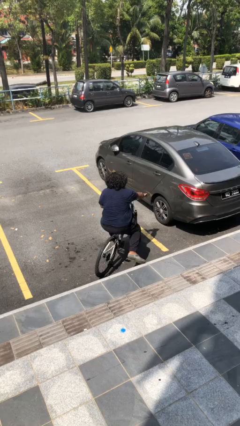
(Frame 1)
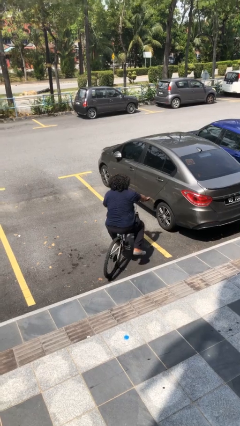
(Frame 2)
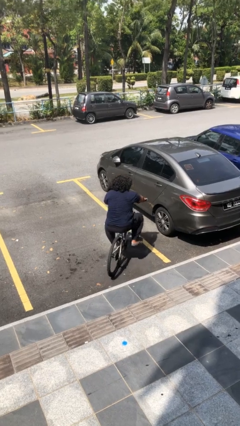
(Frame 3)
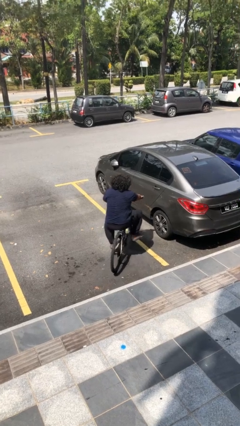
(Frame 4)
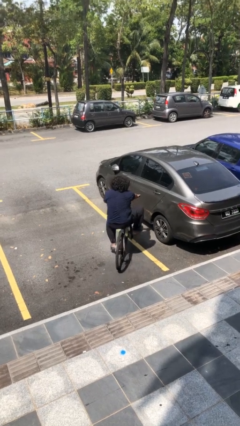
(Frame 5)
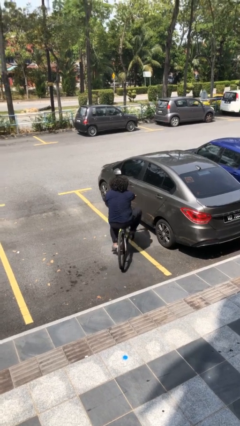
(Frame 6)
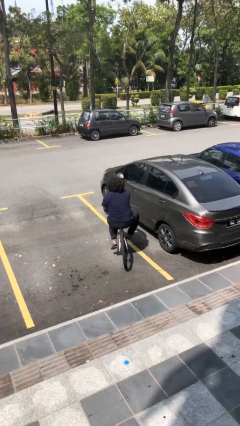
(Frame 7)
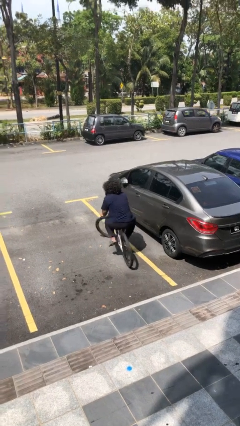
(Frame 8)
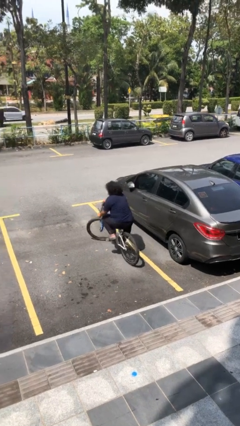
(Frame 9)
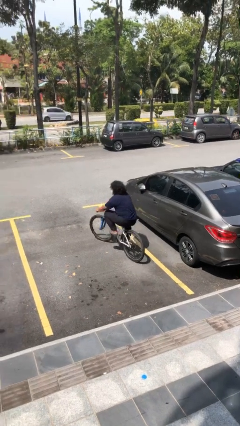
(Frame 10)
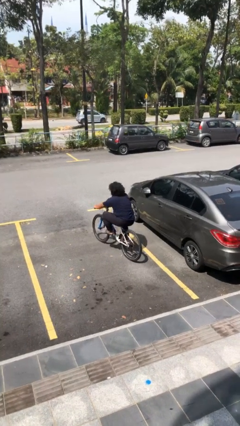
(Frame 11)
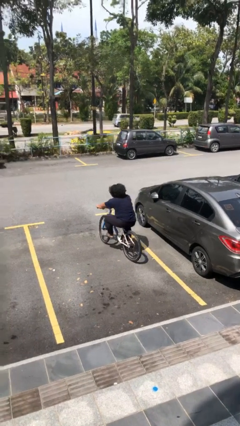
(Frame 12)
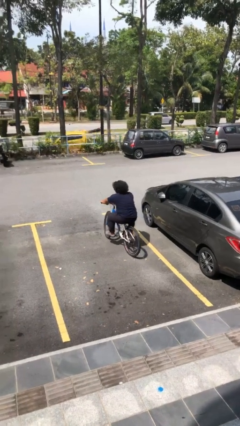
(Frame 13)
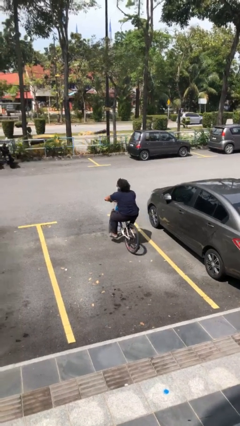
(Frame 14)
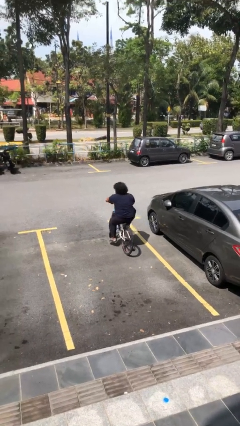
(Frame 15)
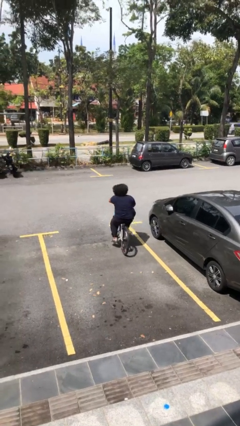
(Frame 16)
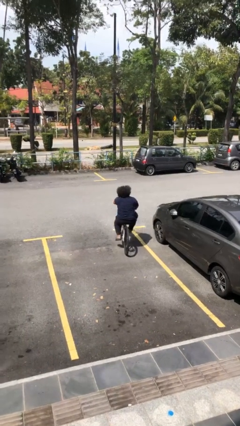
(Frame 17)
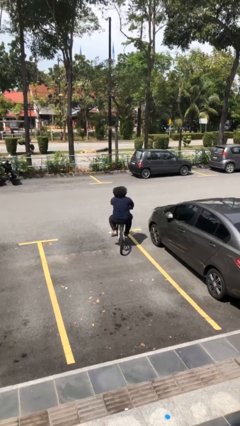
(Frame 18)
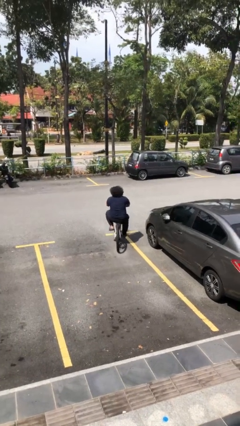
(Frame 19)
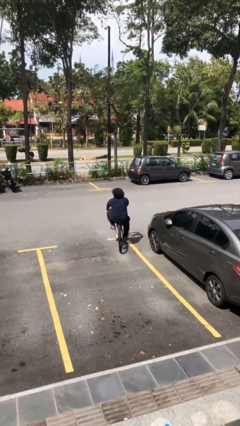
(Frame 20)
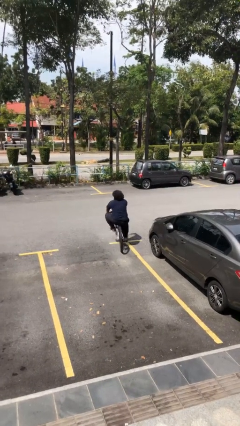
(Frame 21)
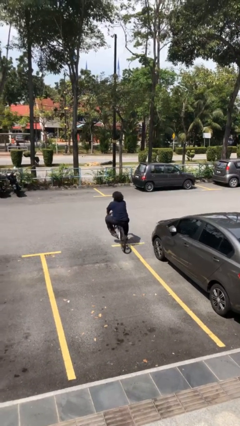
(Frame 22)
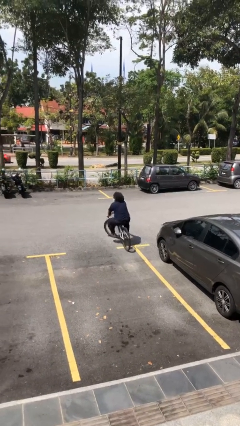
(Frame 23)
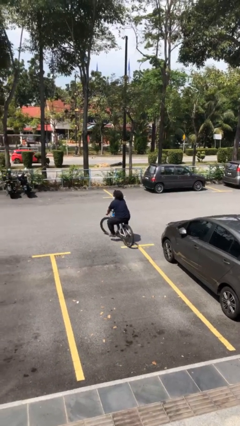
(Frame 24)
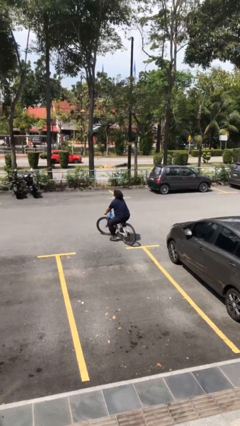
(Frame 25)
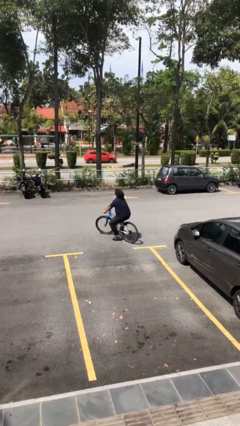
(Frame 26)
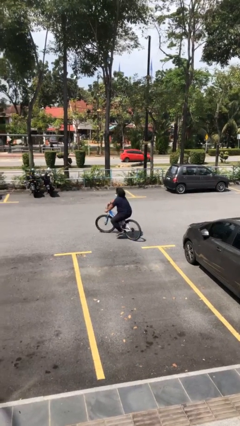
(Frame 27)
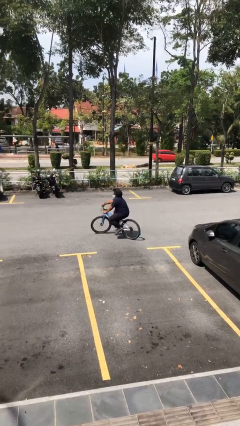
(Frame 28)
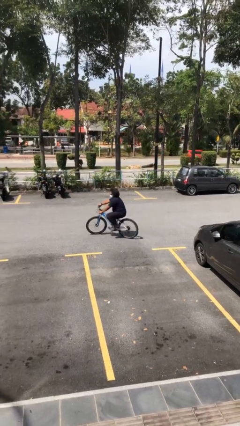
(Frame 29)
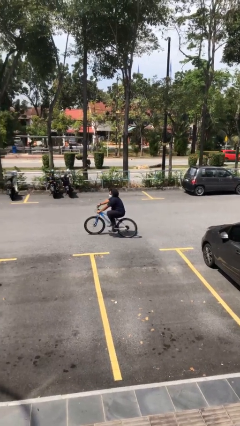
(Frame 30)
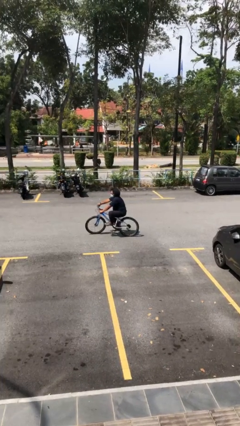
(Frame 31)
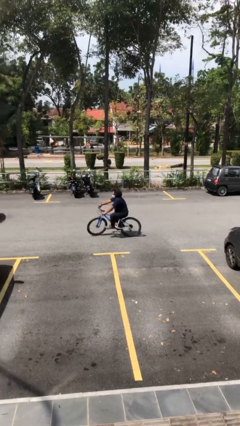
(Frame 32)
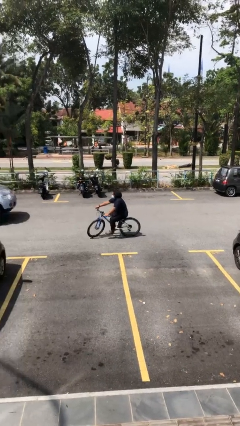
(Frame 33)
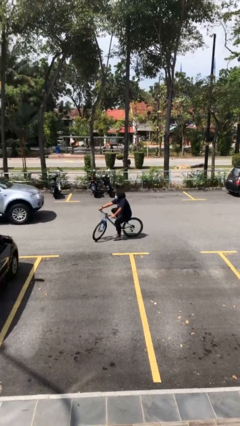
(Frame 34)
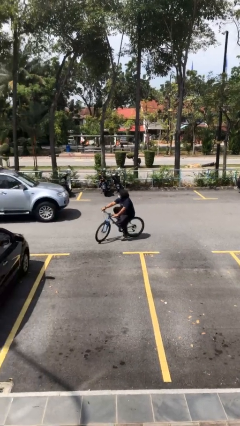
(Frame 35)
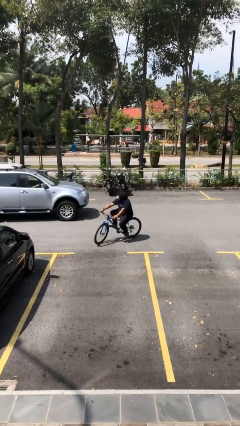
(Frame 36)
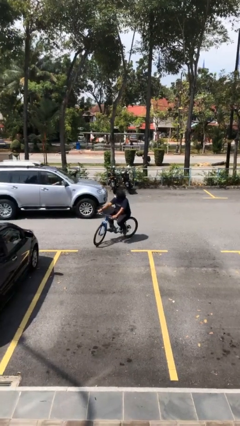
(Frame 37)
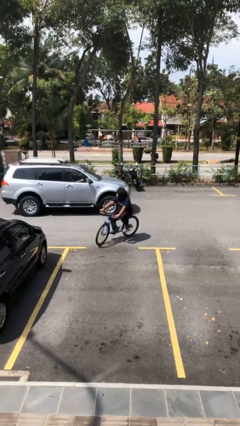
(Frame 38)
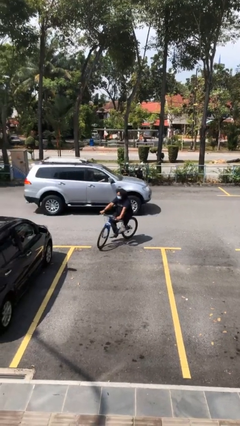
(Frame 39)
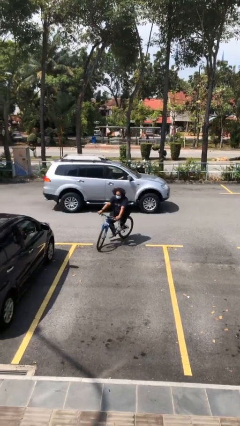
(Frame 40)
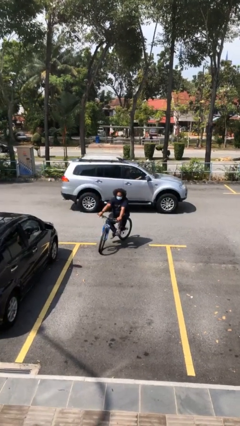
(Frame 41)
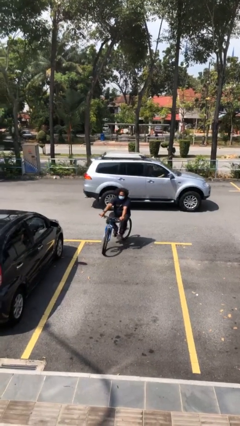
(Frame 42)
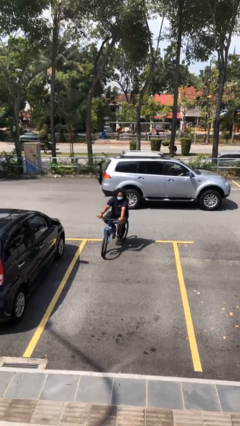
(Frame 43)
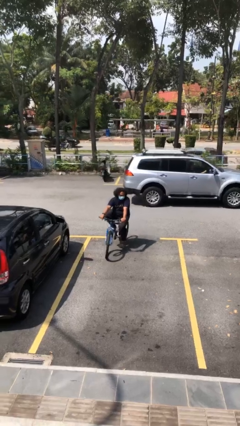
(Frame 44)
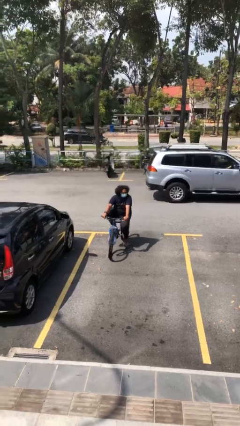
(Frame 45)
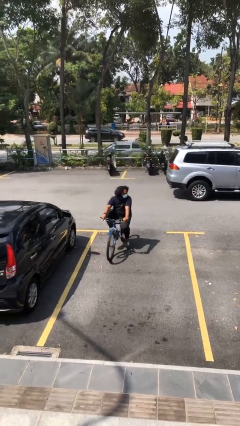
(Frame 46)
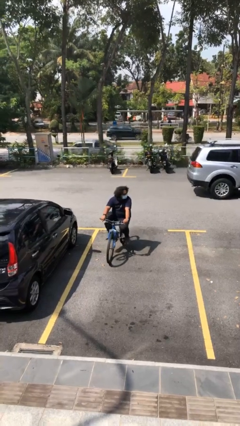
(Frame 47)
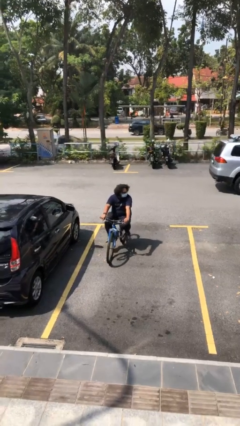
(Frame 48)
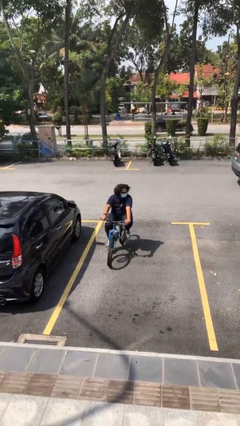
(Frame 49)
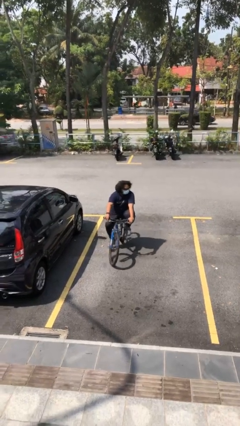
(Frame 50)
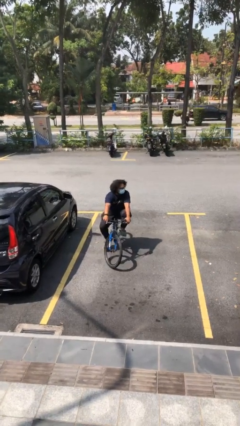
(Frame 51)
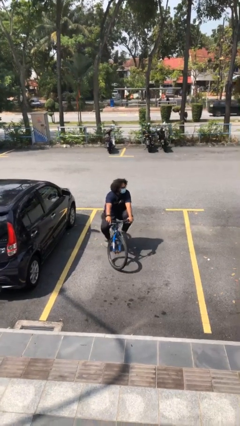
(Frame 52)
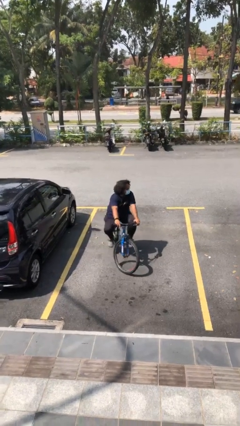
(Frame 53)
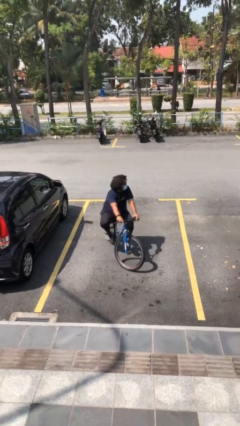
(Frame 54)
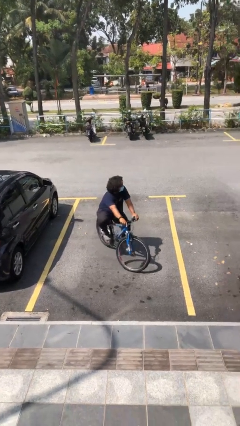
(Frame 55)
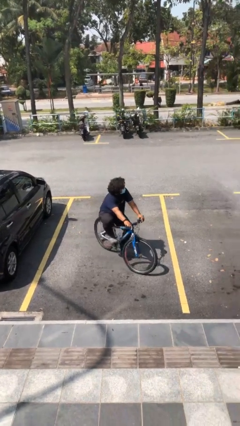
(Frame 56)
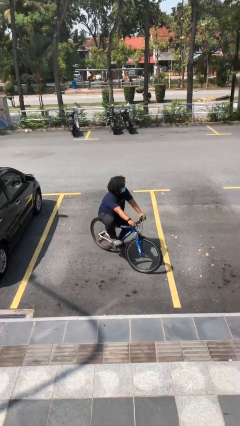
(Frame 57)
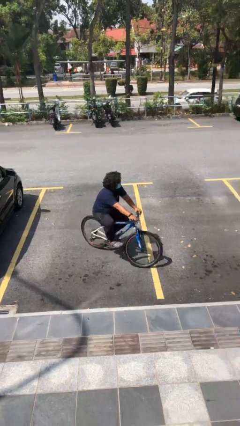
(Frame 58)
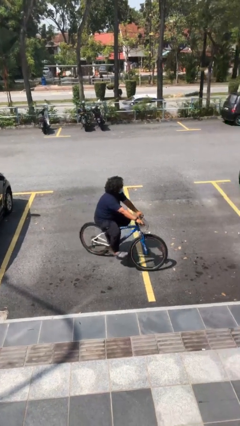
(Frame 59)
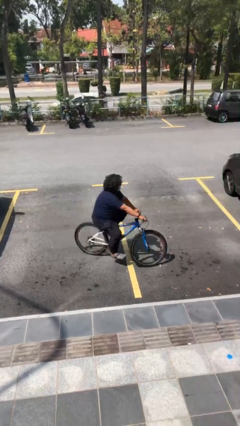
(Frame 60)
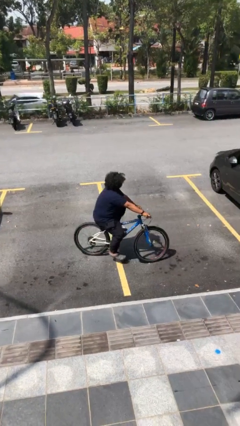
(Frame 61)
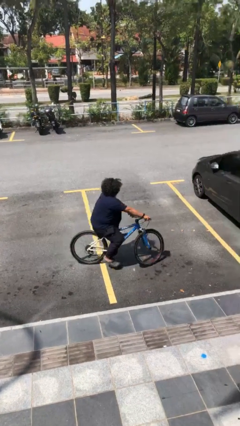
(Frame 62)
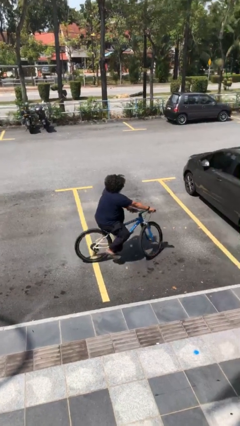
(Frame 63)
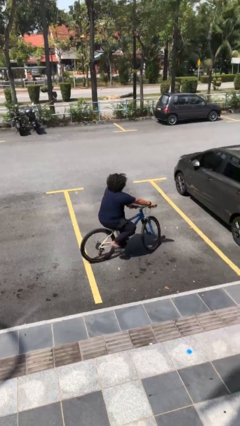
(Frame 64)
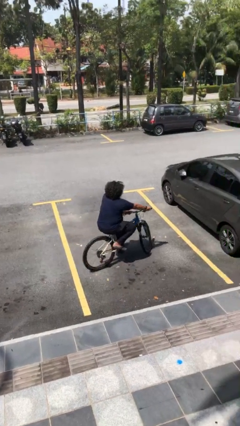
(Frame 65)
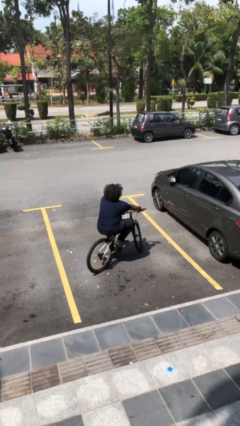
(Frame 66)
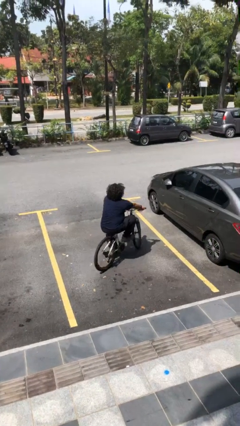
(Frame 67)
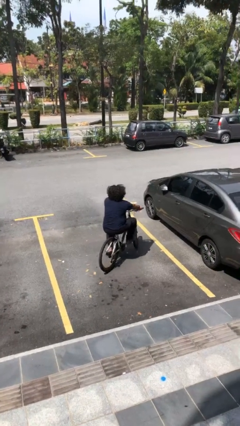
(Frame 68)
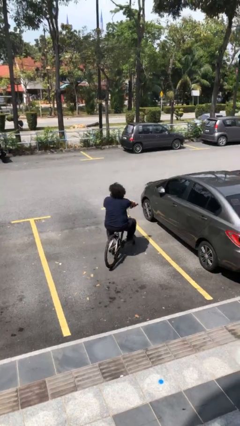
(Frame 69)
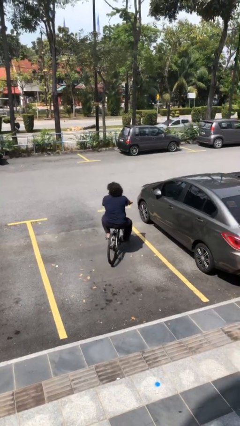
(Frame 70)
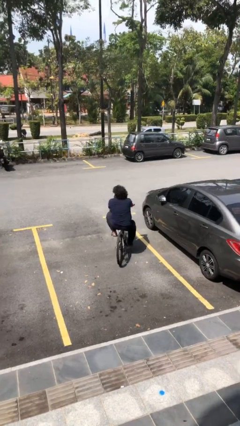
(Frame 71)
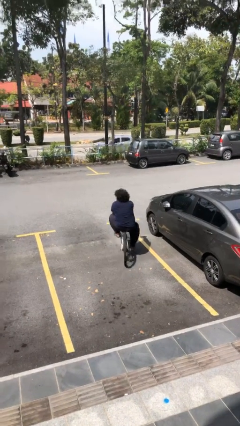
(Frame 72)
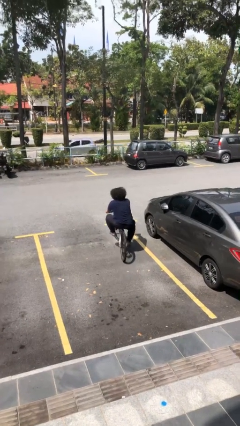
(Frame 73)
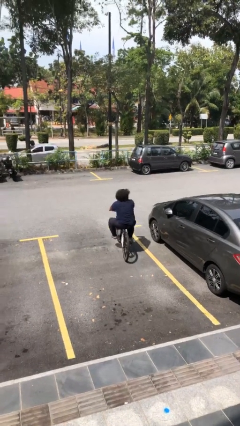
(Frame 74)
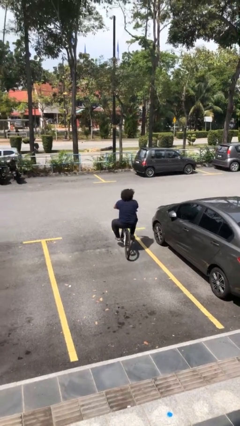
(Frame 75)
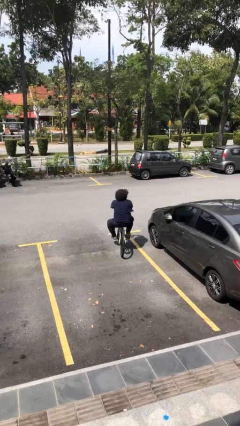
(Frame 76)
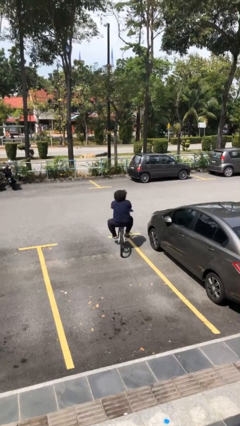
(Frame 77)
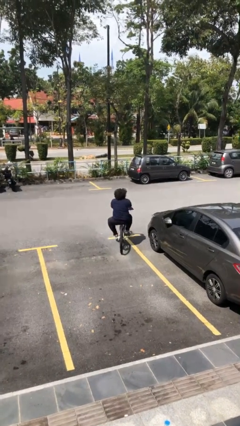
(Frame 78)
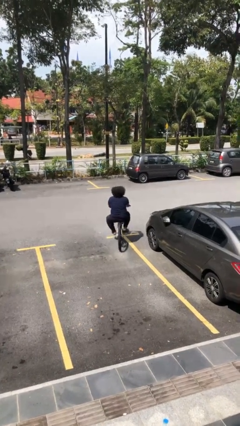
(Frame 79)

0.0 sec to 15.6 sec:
person rides bicycle

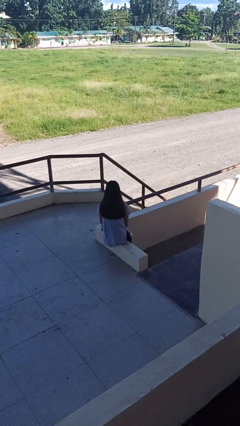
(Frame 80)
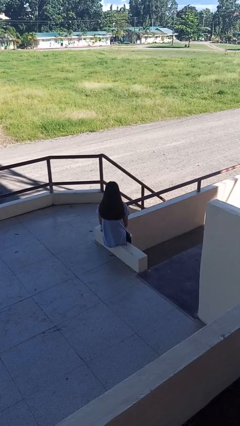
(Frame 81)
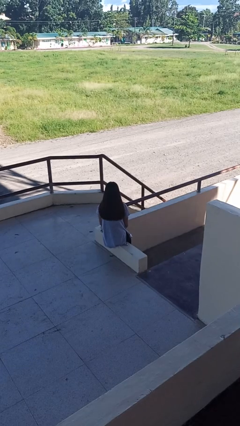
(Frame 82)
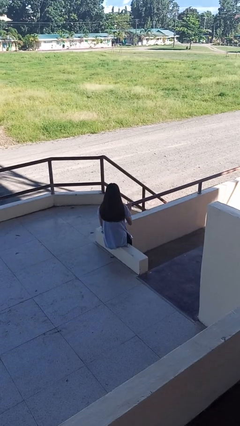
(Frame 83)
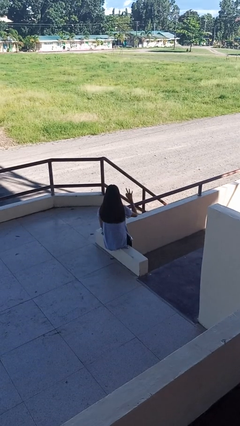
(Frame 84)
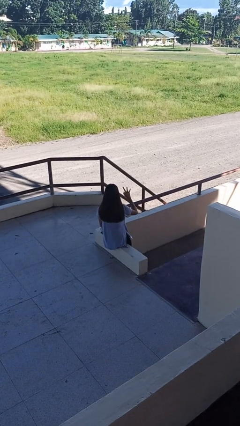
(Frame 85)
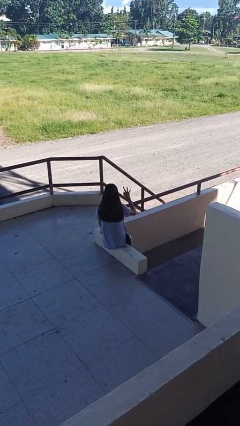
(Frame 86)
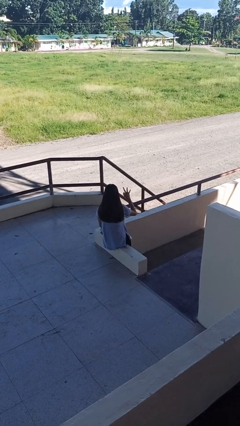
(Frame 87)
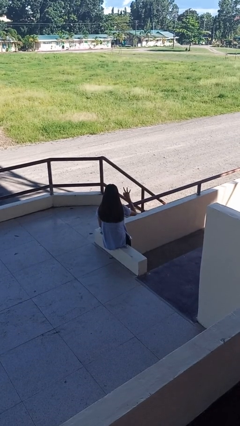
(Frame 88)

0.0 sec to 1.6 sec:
person gestures number three

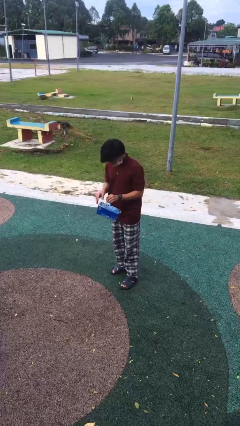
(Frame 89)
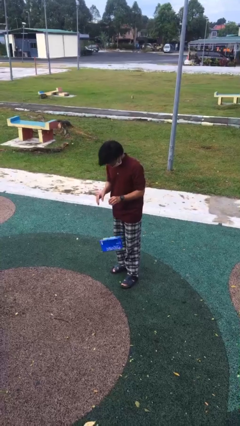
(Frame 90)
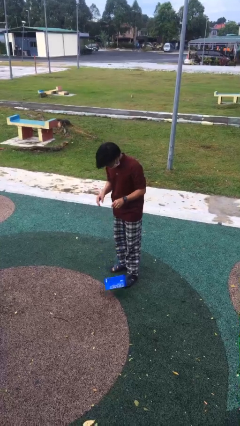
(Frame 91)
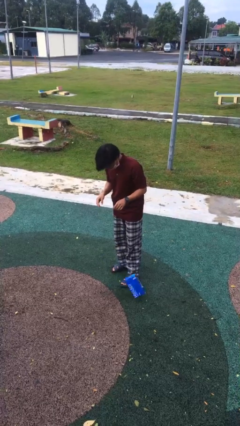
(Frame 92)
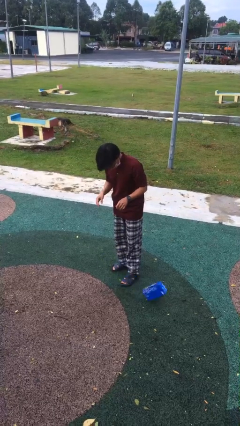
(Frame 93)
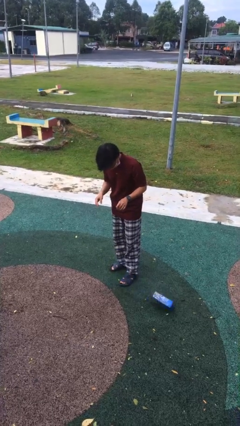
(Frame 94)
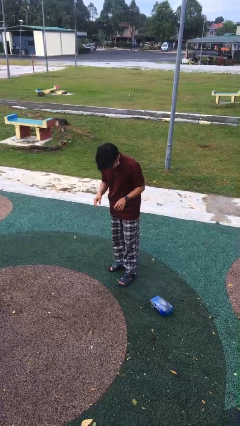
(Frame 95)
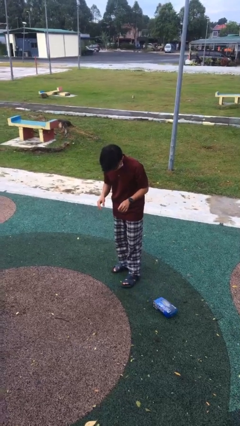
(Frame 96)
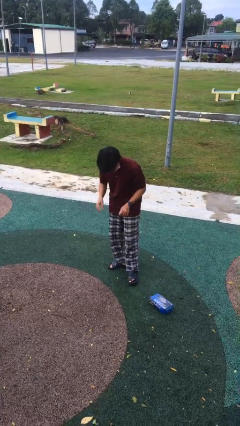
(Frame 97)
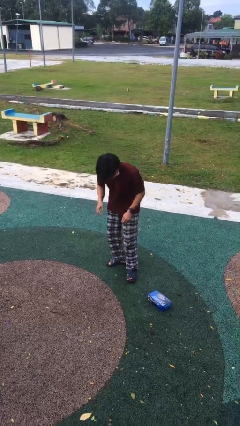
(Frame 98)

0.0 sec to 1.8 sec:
person drops object
